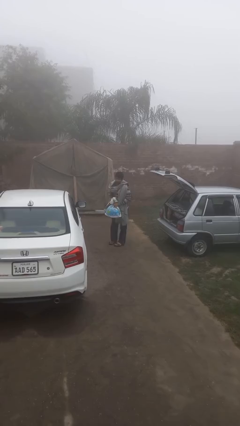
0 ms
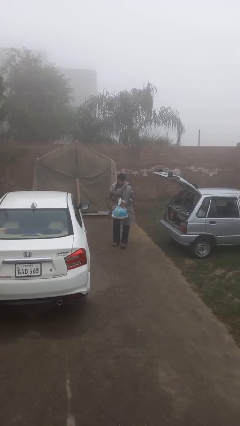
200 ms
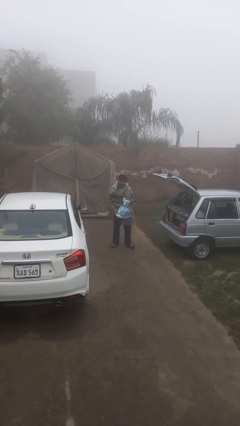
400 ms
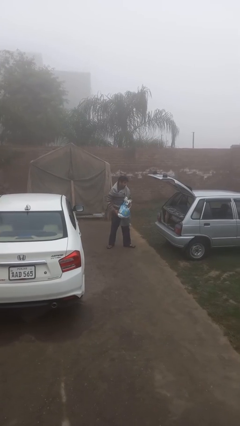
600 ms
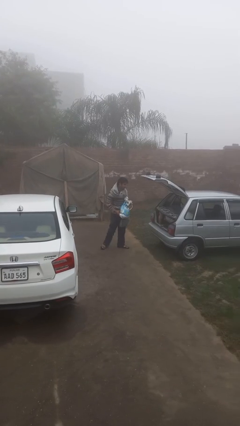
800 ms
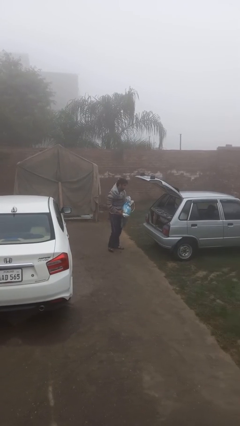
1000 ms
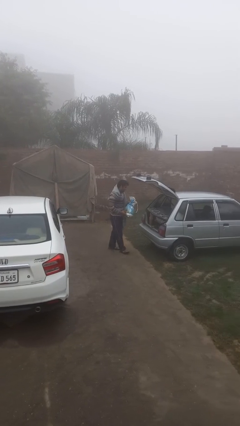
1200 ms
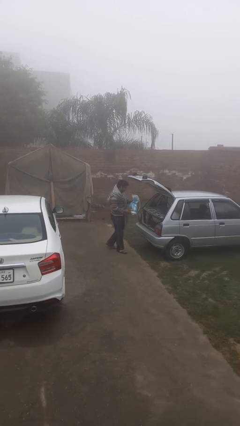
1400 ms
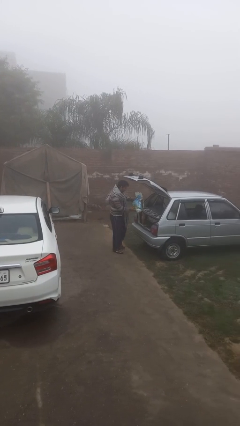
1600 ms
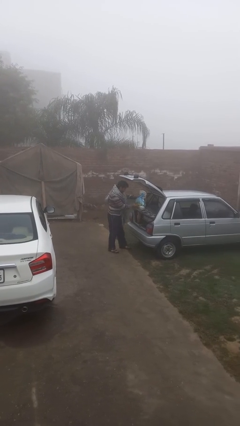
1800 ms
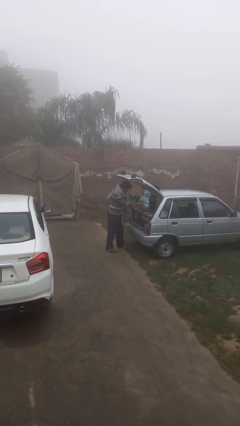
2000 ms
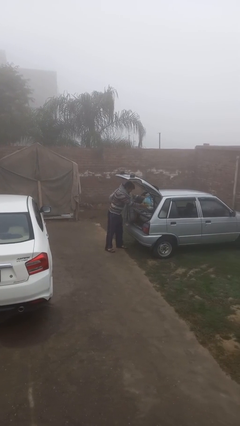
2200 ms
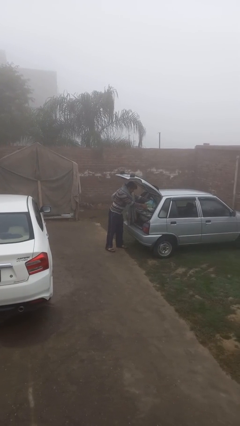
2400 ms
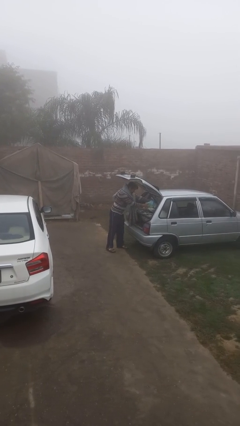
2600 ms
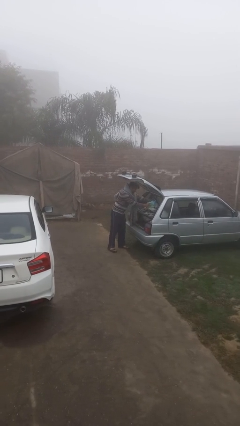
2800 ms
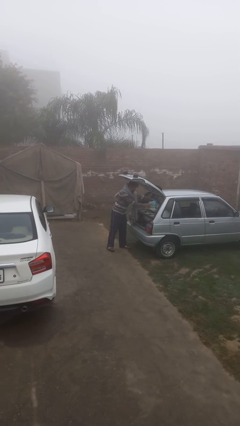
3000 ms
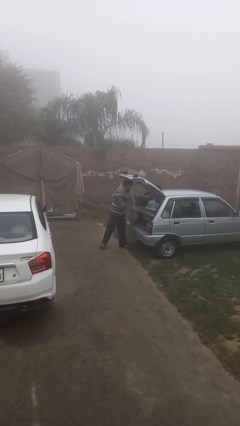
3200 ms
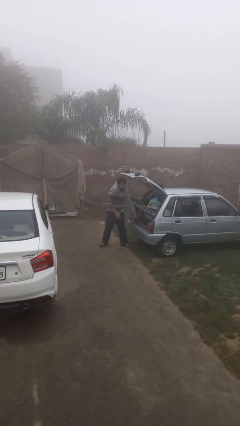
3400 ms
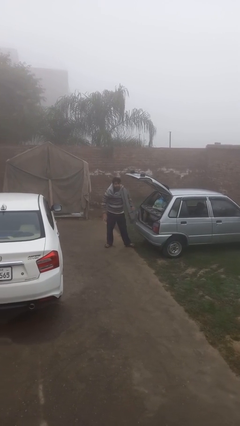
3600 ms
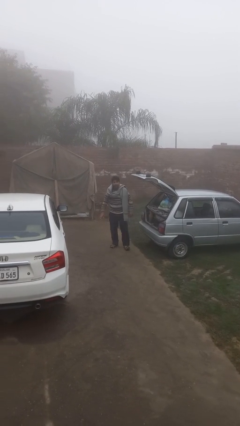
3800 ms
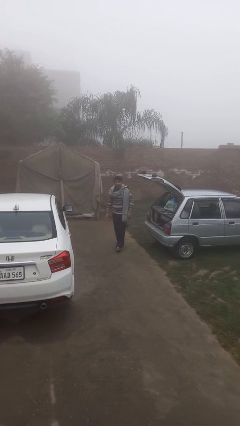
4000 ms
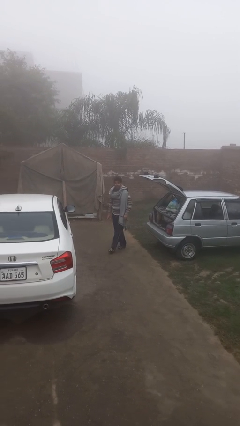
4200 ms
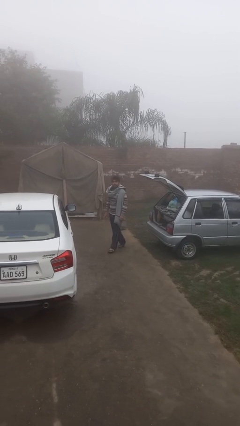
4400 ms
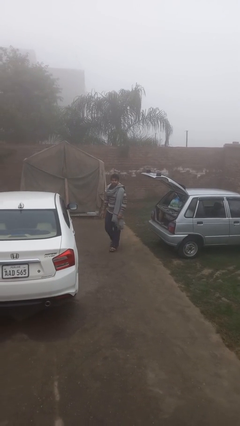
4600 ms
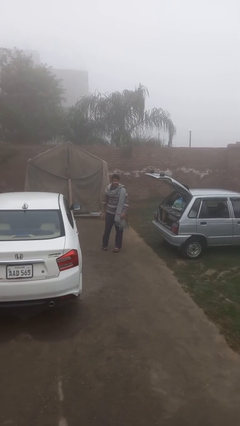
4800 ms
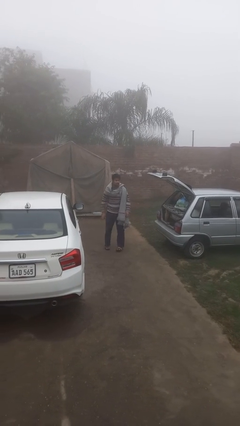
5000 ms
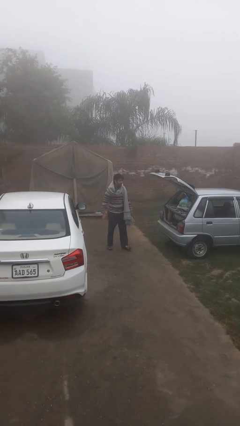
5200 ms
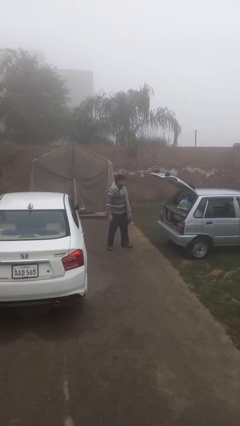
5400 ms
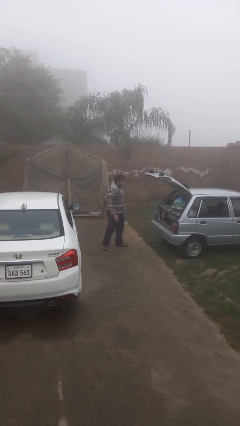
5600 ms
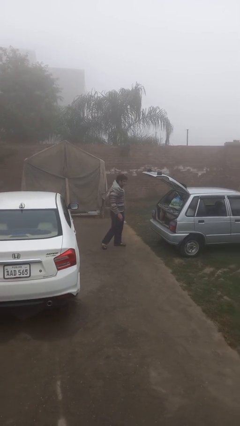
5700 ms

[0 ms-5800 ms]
person loads car

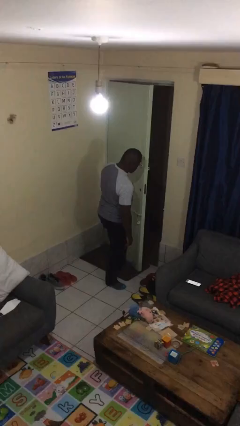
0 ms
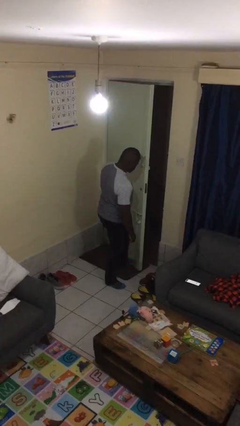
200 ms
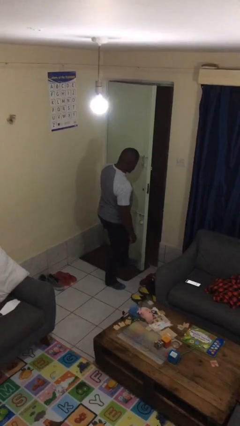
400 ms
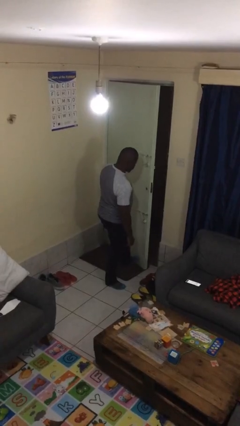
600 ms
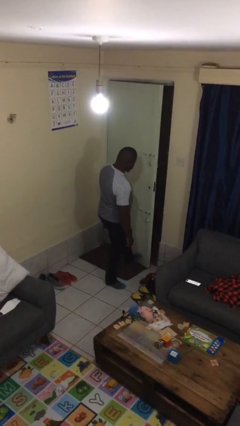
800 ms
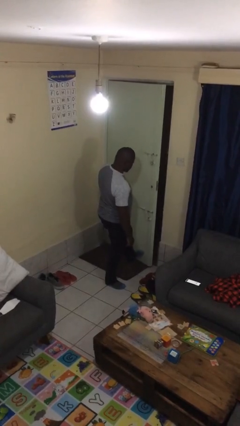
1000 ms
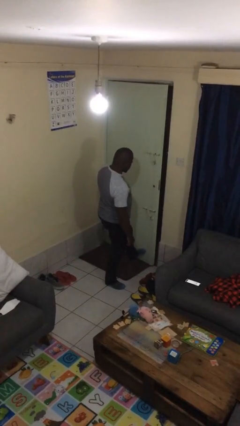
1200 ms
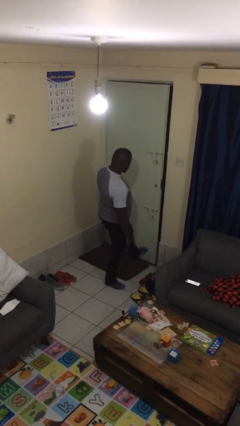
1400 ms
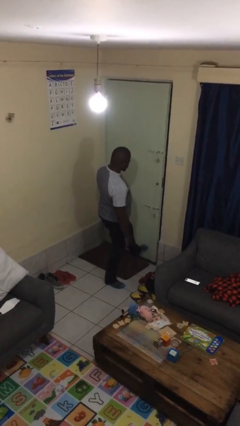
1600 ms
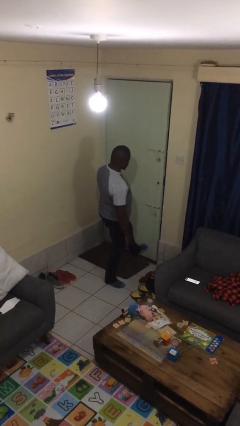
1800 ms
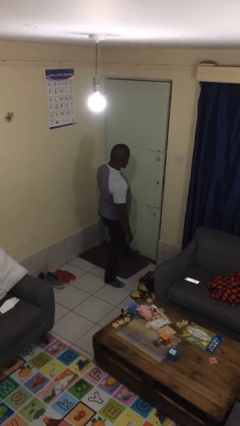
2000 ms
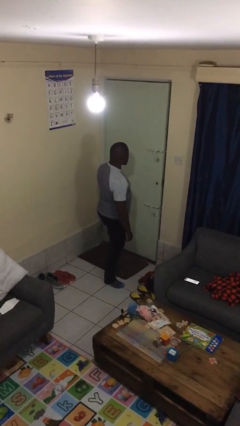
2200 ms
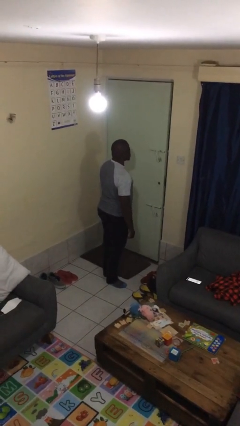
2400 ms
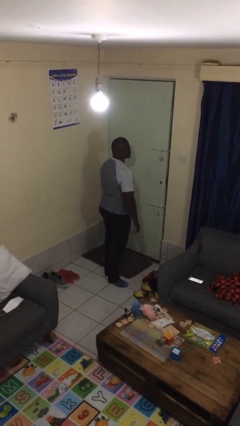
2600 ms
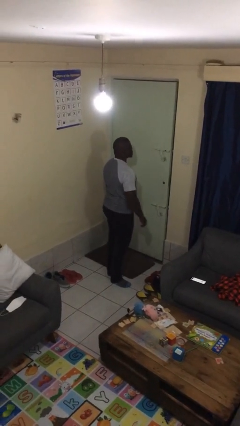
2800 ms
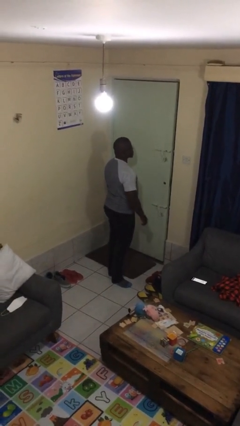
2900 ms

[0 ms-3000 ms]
person closes door with foot

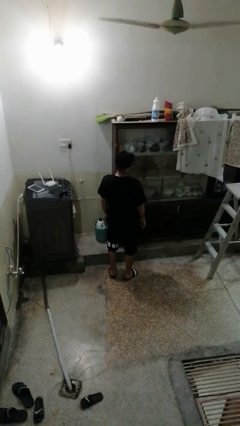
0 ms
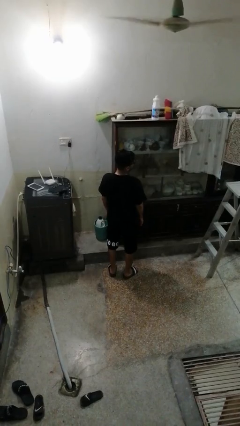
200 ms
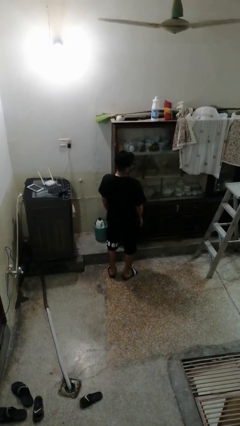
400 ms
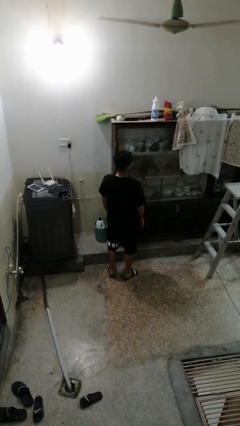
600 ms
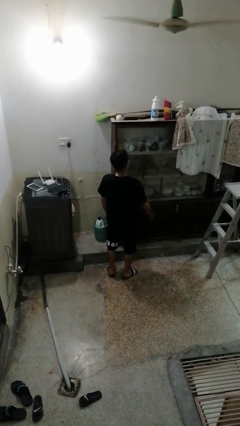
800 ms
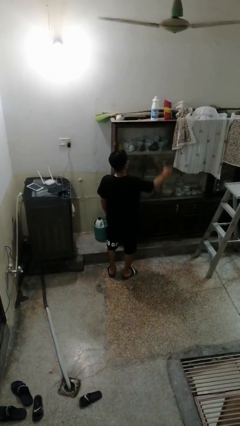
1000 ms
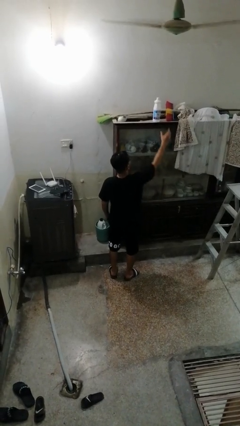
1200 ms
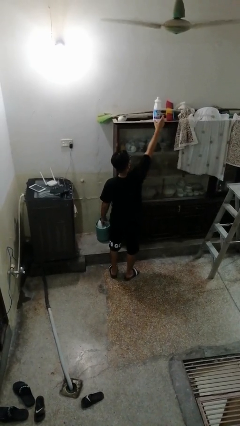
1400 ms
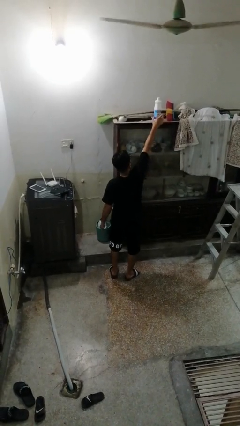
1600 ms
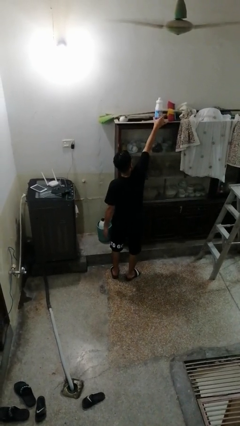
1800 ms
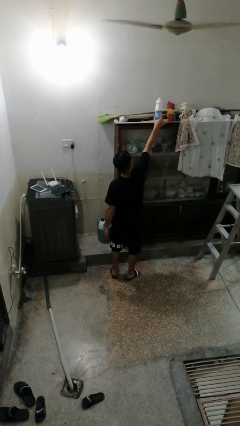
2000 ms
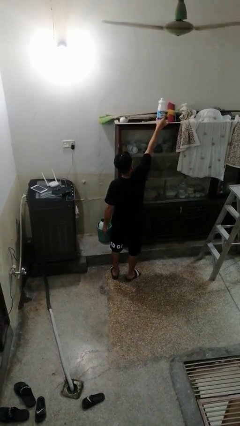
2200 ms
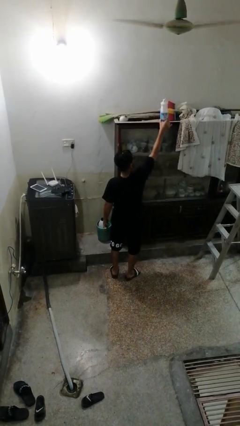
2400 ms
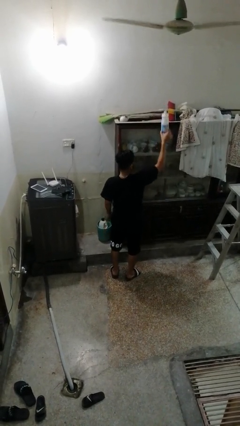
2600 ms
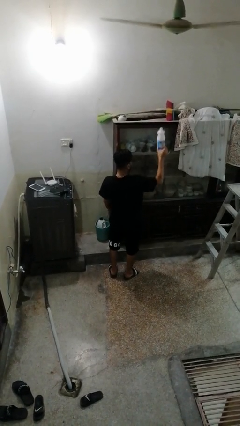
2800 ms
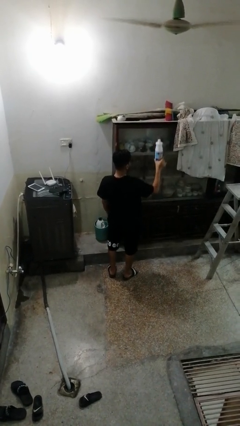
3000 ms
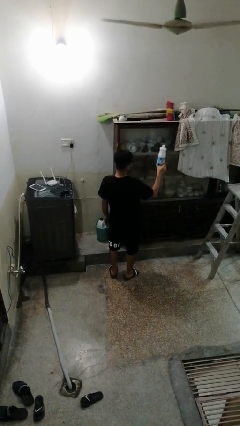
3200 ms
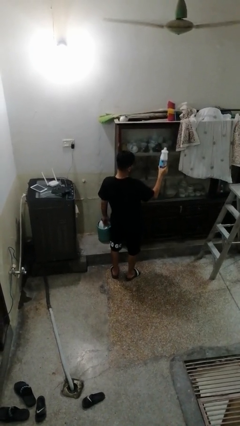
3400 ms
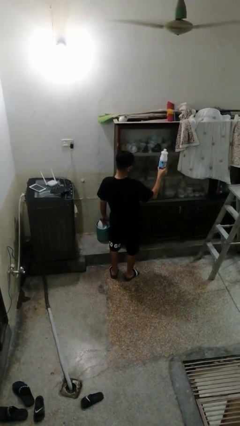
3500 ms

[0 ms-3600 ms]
person picks up object from shelf

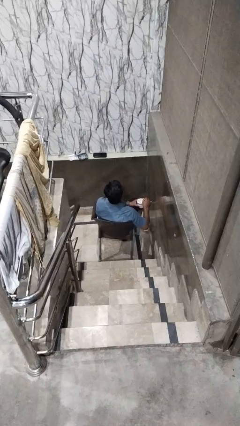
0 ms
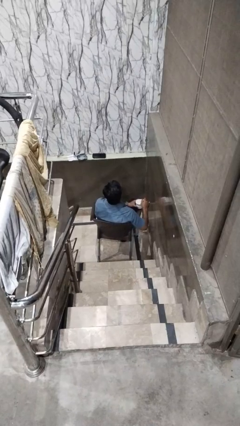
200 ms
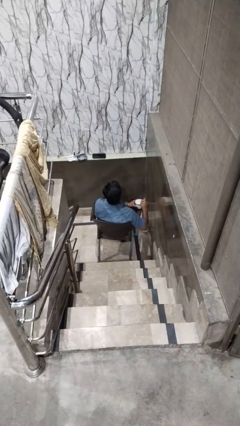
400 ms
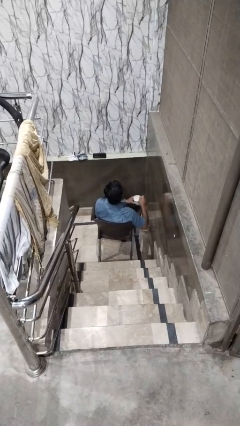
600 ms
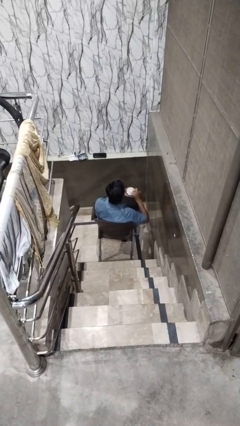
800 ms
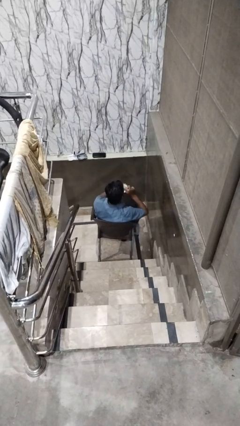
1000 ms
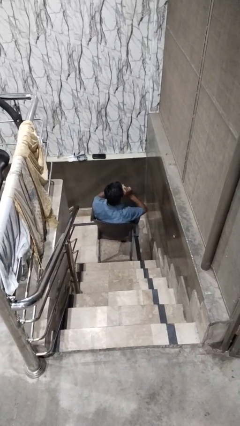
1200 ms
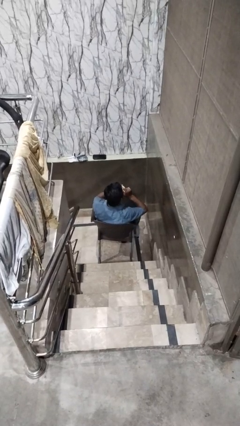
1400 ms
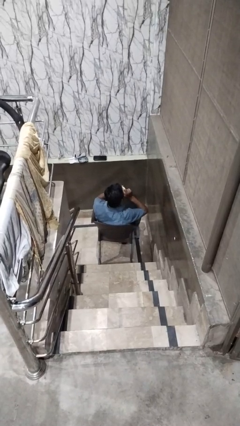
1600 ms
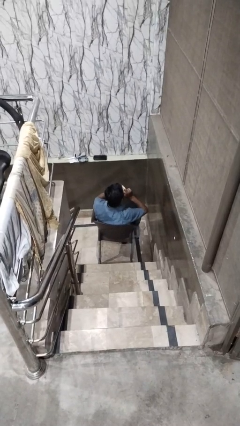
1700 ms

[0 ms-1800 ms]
person drinks from mug

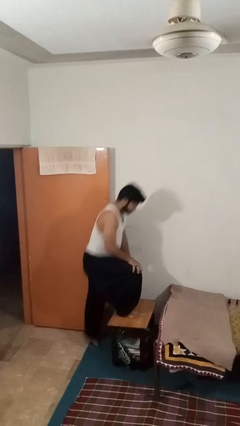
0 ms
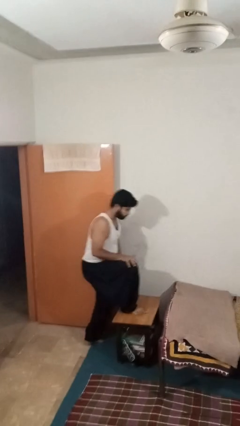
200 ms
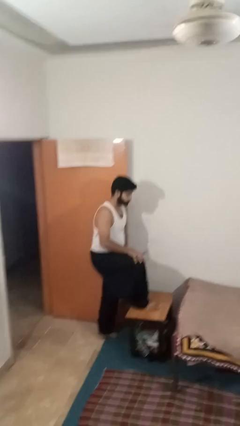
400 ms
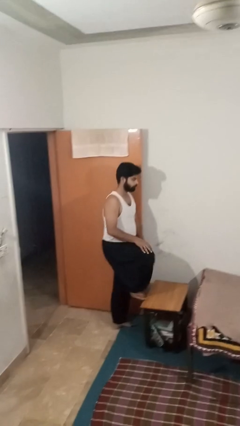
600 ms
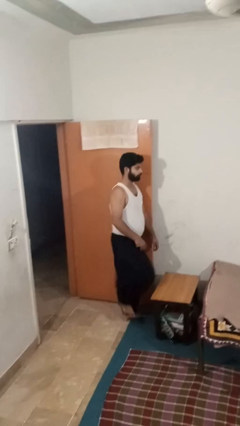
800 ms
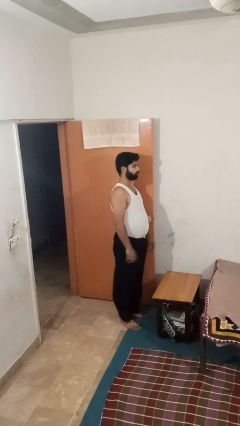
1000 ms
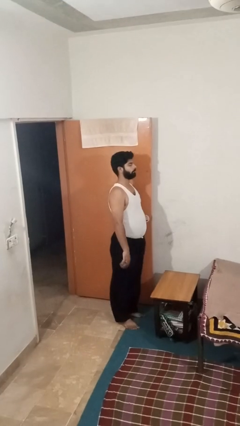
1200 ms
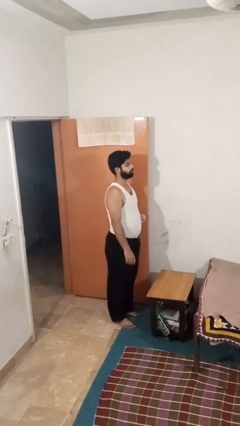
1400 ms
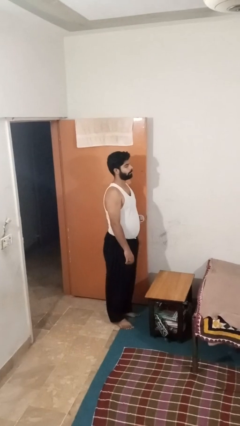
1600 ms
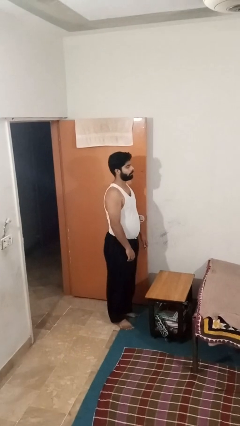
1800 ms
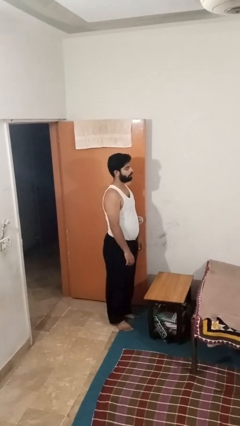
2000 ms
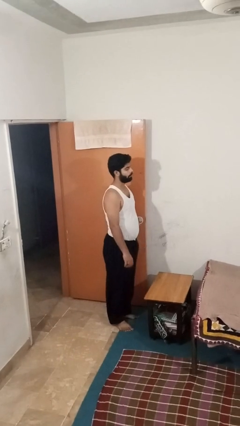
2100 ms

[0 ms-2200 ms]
person climbs off table

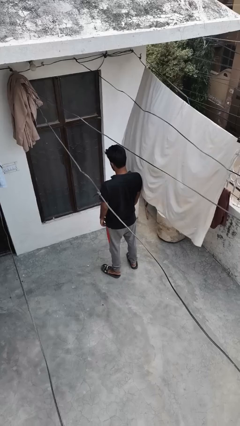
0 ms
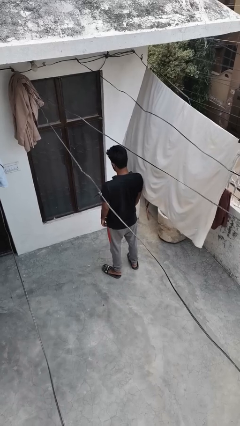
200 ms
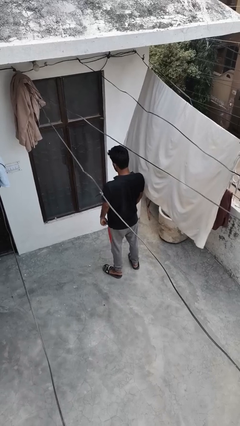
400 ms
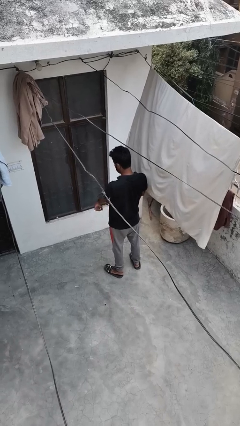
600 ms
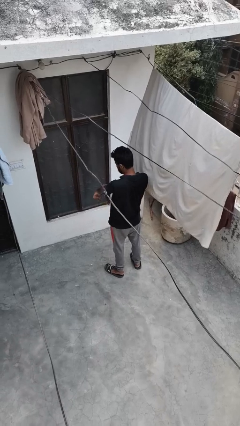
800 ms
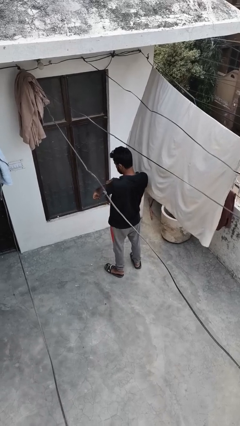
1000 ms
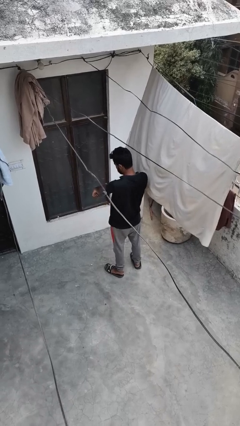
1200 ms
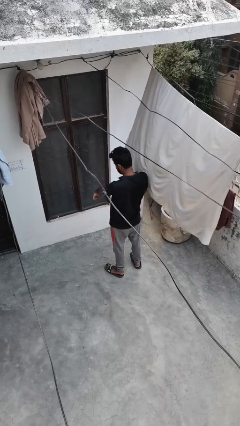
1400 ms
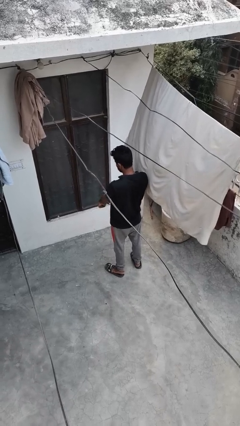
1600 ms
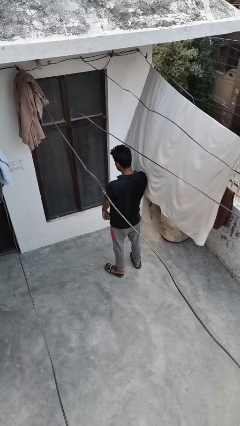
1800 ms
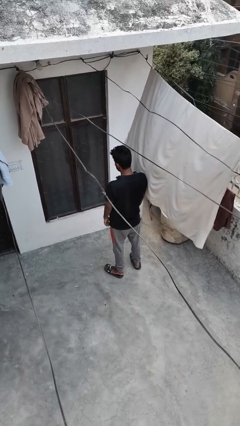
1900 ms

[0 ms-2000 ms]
person swats bug
